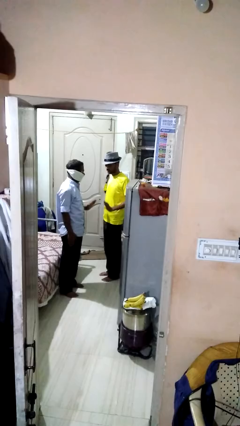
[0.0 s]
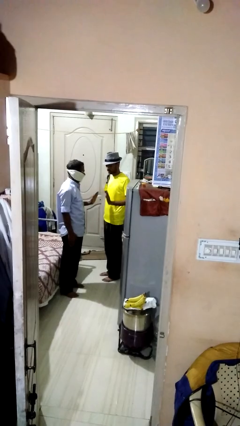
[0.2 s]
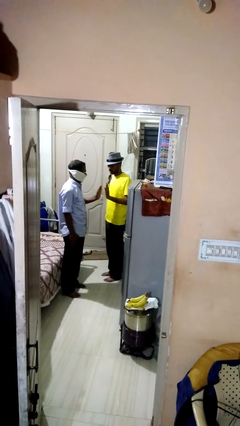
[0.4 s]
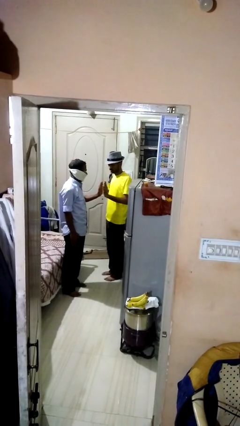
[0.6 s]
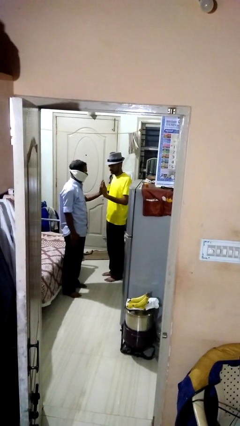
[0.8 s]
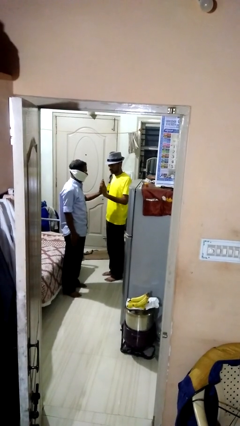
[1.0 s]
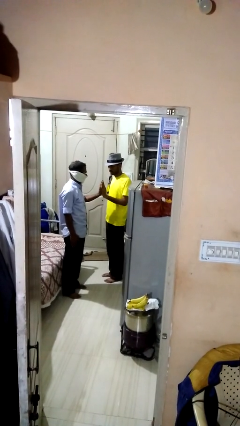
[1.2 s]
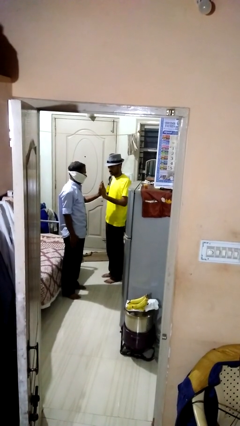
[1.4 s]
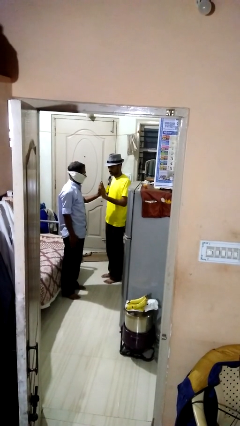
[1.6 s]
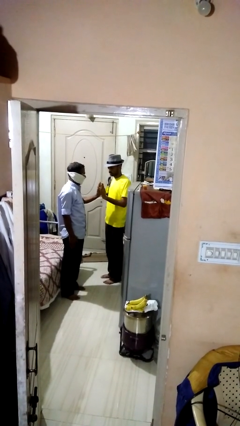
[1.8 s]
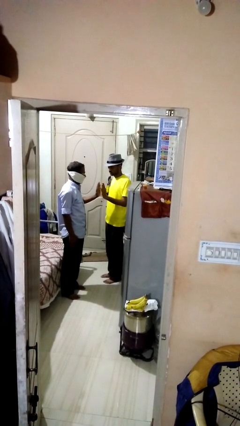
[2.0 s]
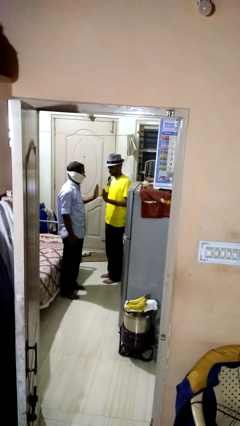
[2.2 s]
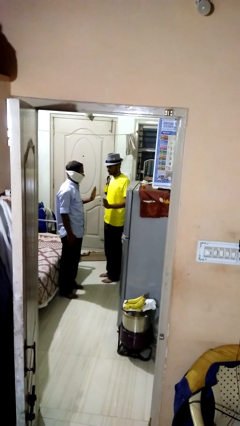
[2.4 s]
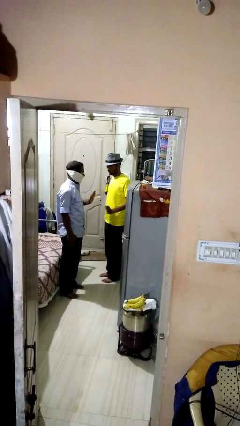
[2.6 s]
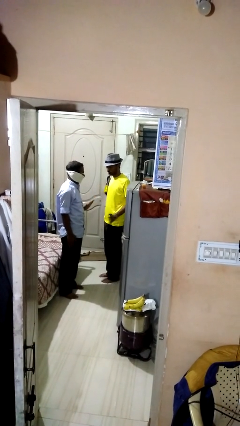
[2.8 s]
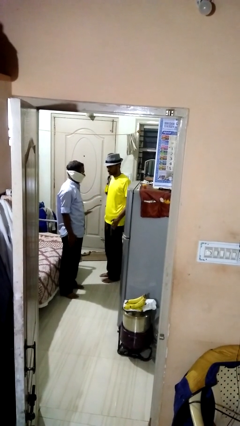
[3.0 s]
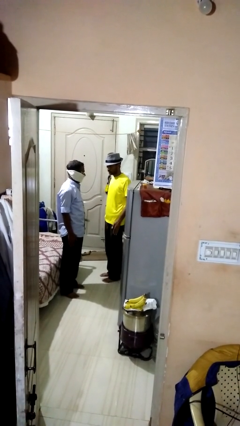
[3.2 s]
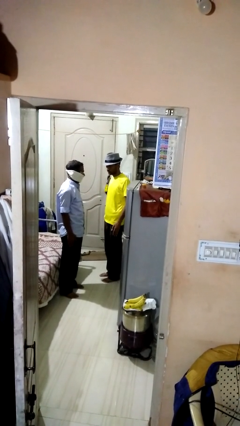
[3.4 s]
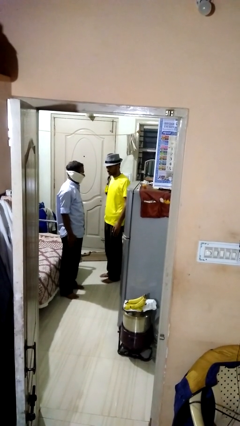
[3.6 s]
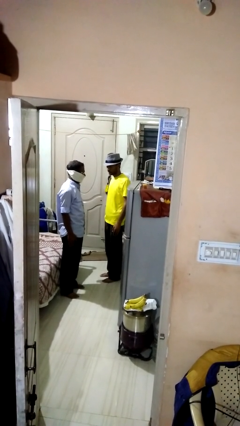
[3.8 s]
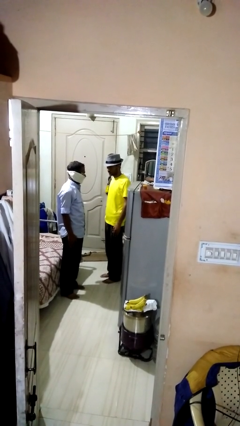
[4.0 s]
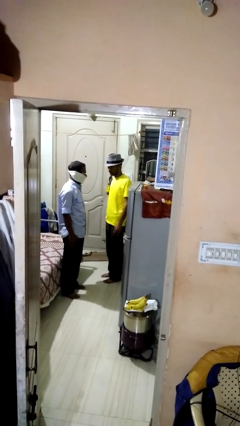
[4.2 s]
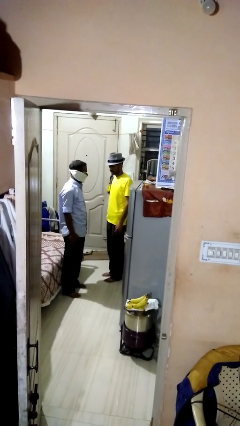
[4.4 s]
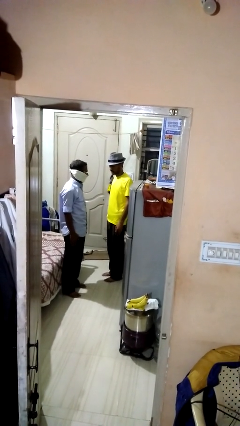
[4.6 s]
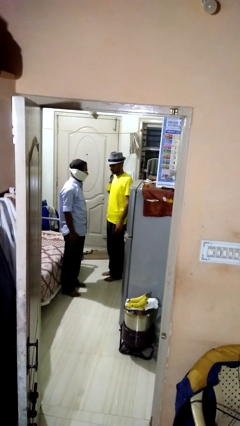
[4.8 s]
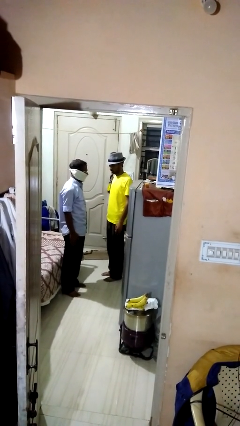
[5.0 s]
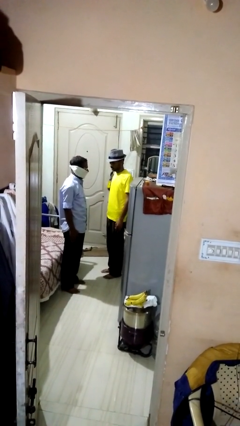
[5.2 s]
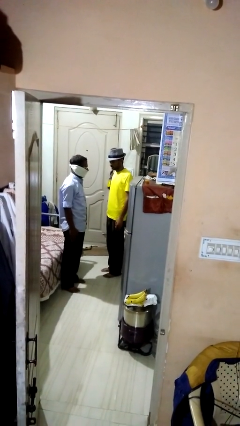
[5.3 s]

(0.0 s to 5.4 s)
person highfives hand

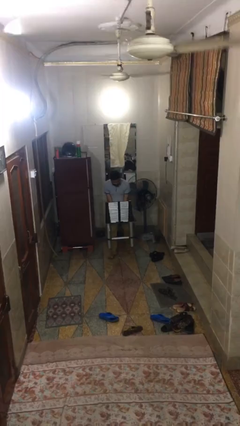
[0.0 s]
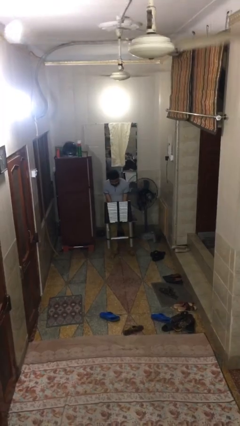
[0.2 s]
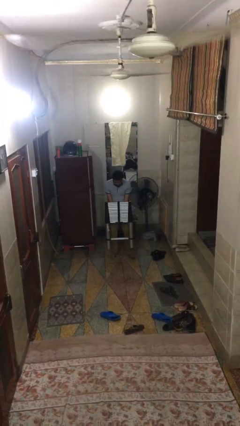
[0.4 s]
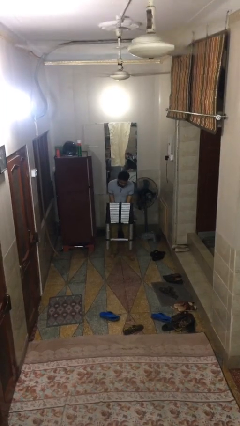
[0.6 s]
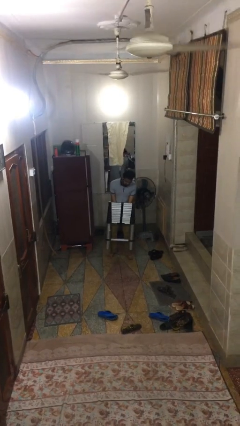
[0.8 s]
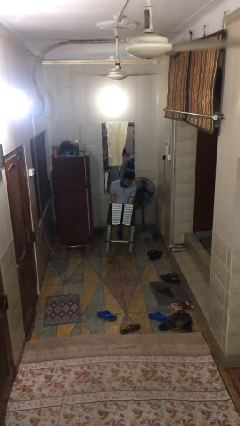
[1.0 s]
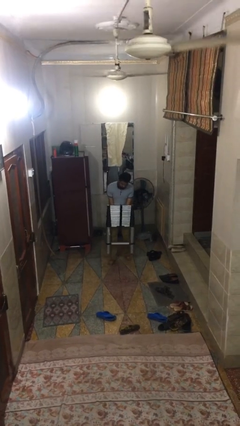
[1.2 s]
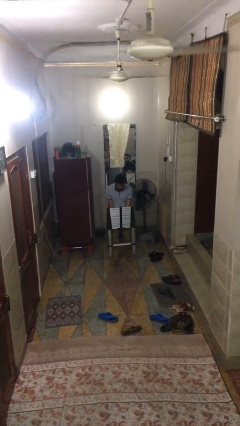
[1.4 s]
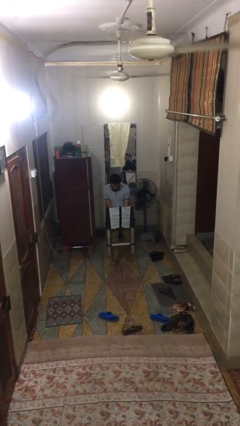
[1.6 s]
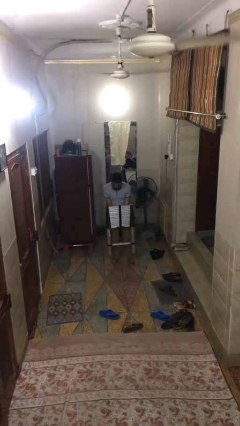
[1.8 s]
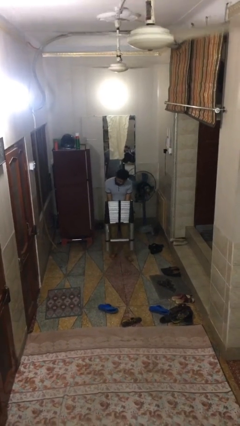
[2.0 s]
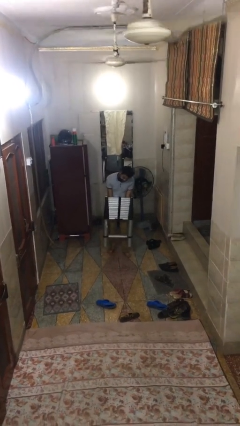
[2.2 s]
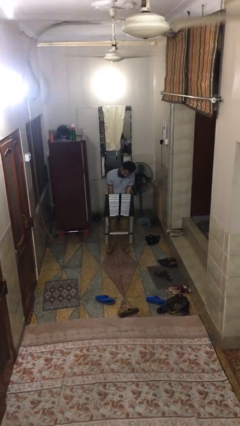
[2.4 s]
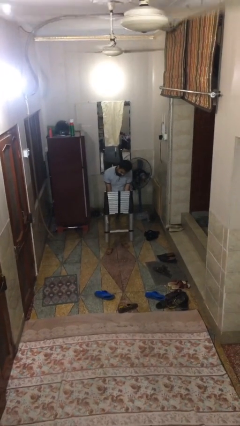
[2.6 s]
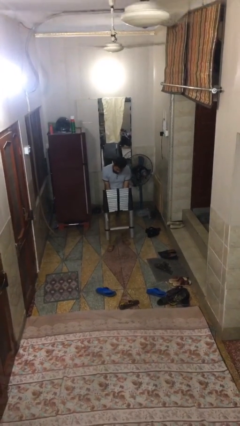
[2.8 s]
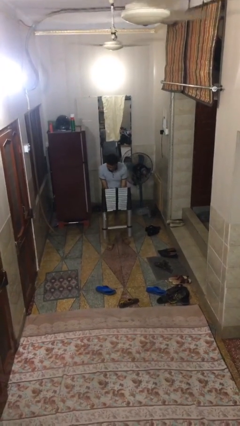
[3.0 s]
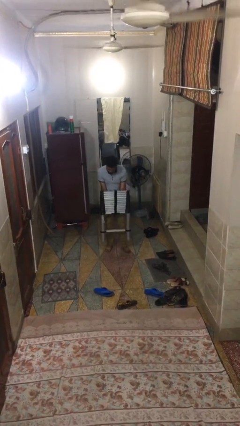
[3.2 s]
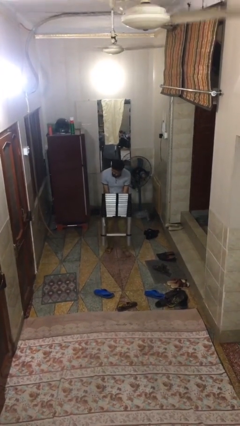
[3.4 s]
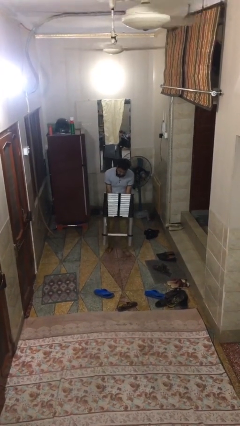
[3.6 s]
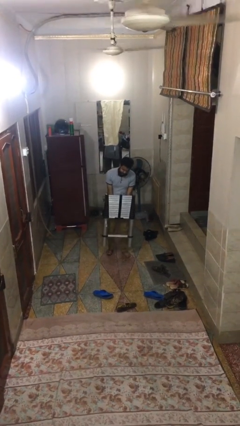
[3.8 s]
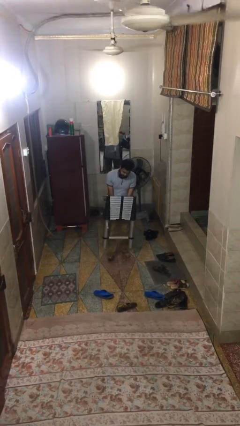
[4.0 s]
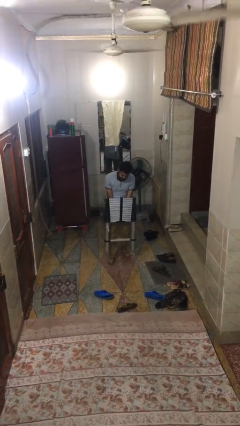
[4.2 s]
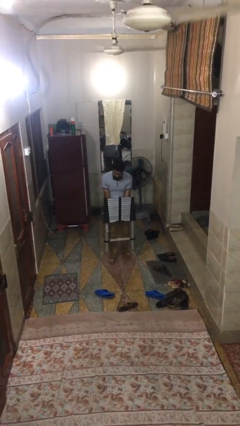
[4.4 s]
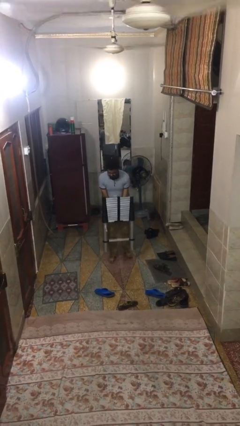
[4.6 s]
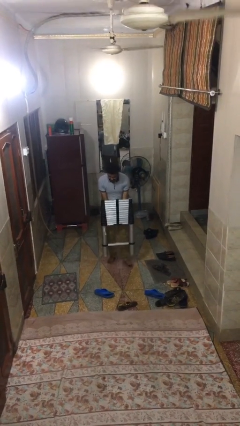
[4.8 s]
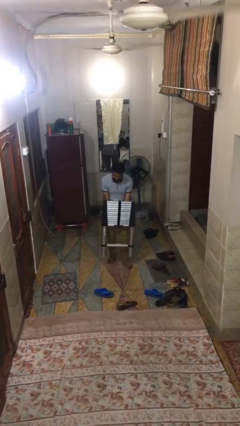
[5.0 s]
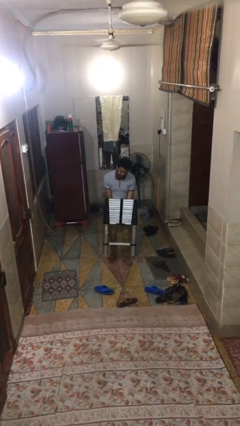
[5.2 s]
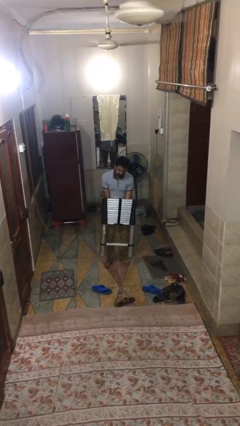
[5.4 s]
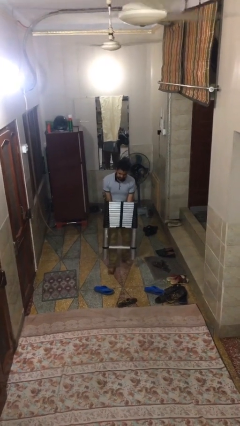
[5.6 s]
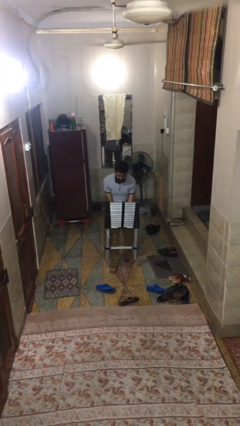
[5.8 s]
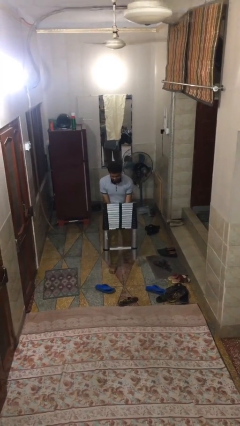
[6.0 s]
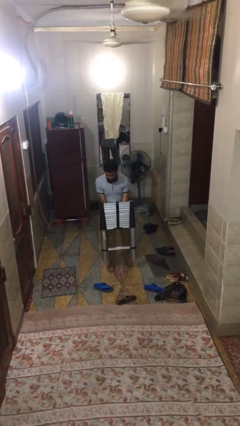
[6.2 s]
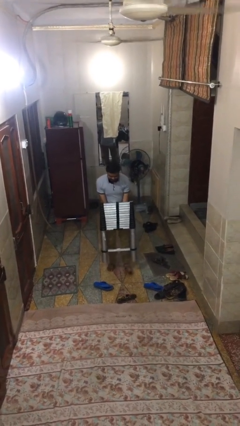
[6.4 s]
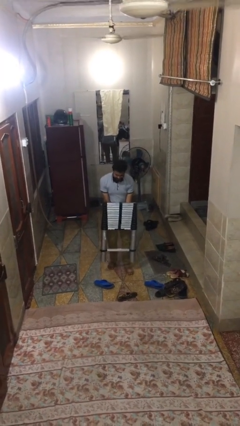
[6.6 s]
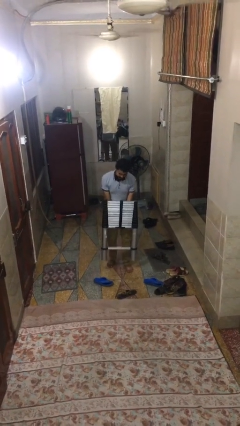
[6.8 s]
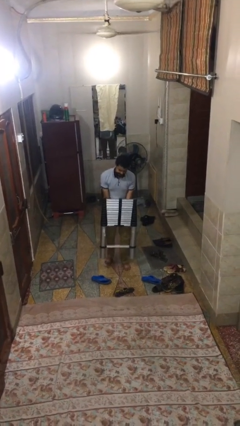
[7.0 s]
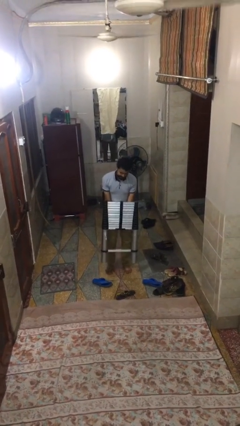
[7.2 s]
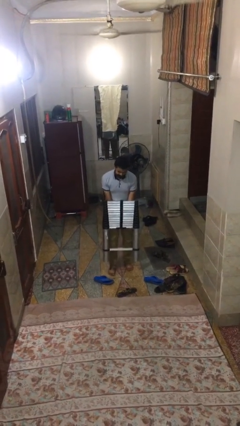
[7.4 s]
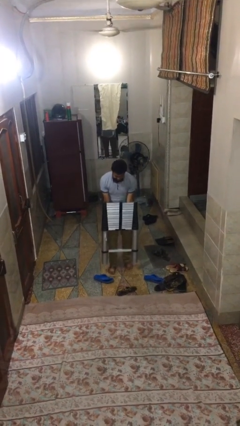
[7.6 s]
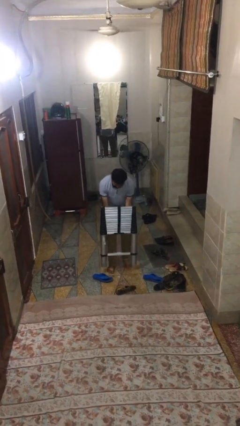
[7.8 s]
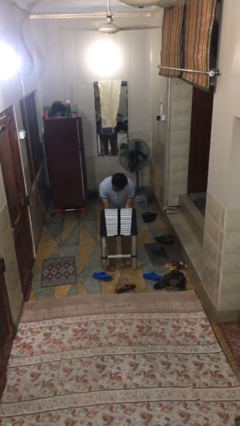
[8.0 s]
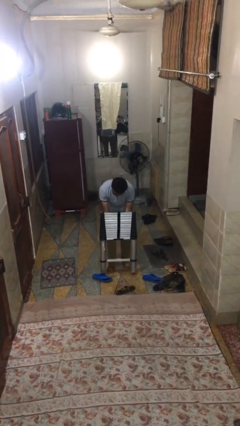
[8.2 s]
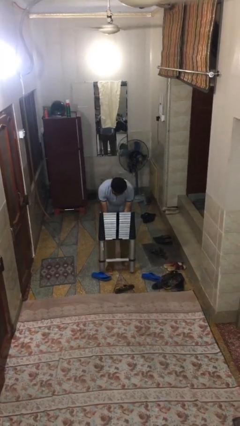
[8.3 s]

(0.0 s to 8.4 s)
person carries heavy object

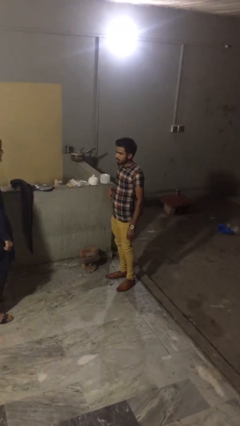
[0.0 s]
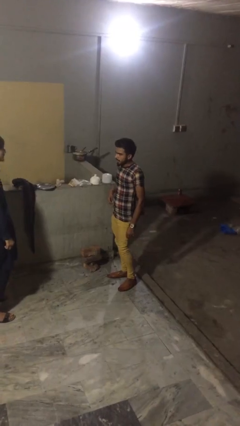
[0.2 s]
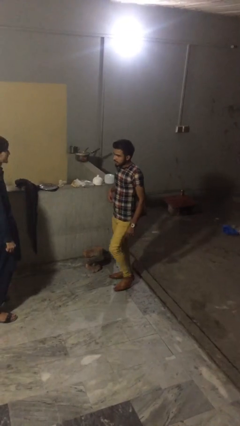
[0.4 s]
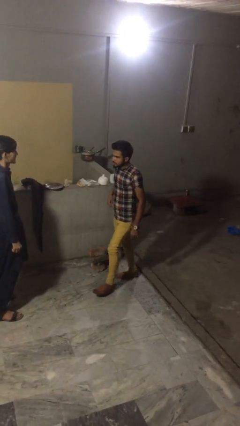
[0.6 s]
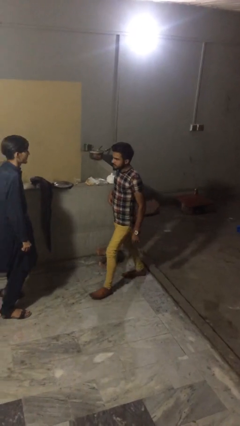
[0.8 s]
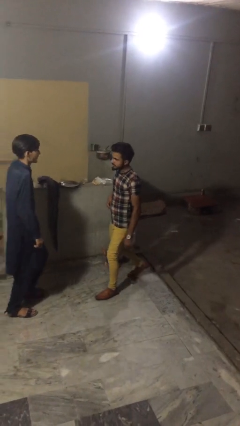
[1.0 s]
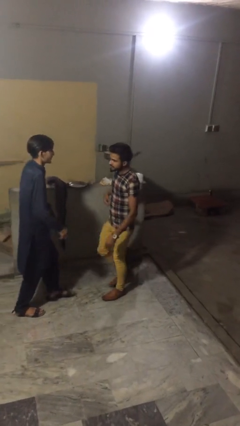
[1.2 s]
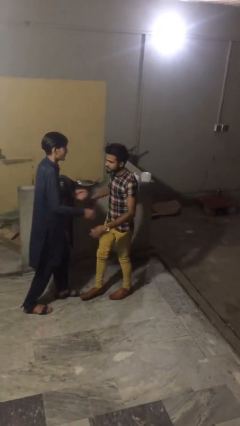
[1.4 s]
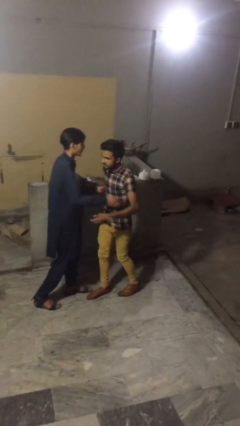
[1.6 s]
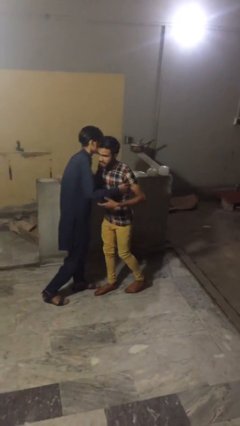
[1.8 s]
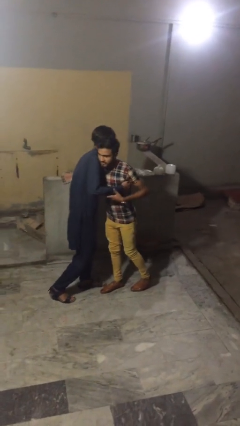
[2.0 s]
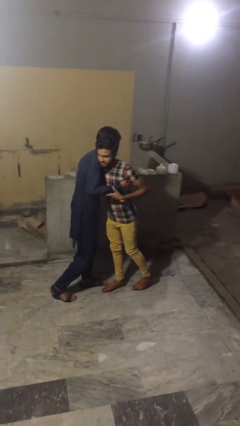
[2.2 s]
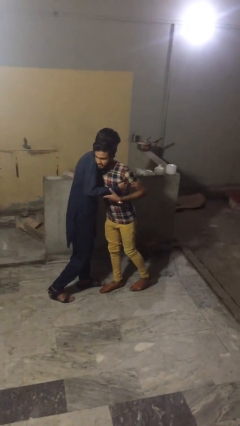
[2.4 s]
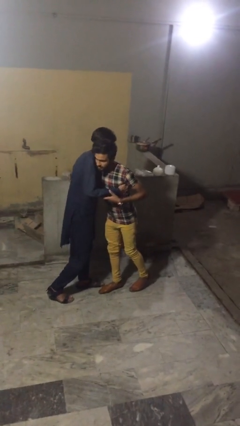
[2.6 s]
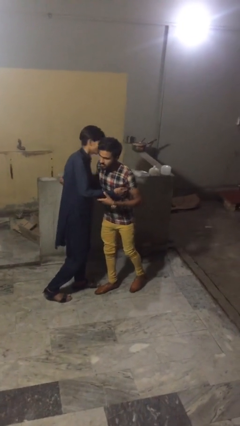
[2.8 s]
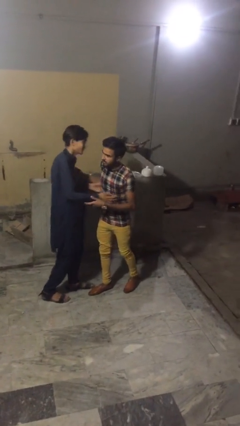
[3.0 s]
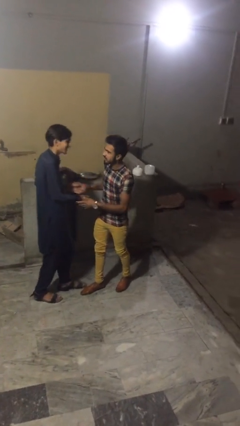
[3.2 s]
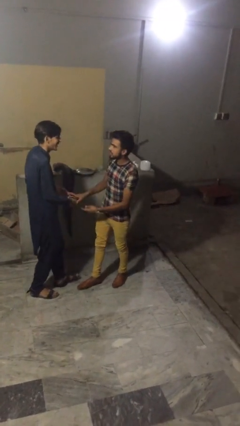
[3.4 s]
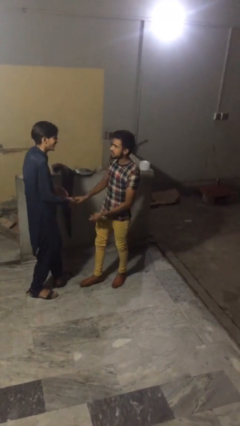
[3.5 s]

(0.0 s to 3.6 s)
person embraces person

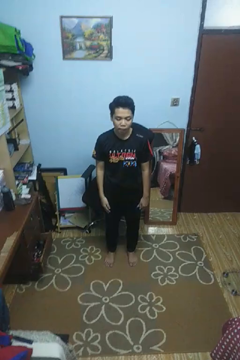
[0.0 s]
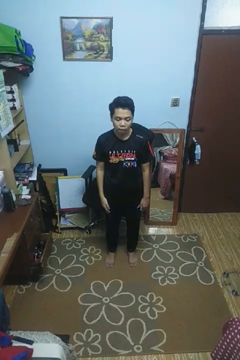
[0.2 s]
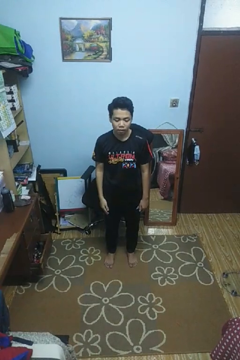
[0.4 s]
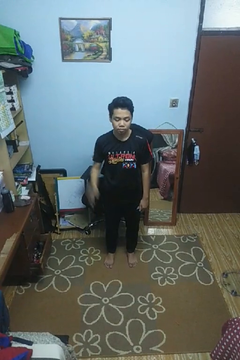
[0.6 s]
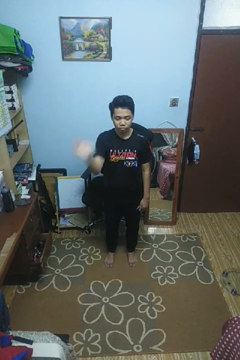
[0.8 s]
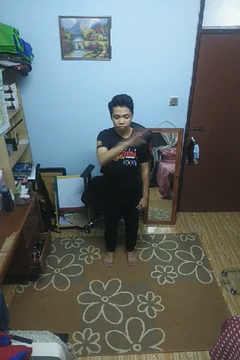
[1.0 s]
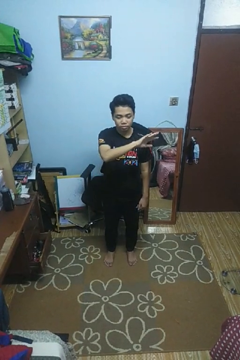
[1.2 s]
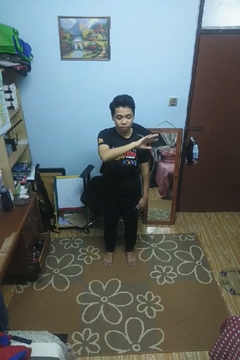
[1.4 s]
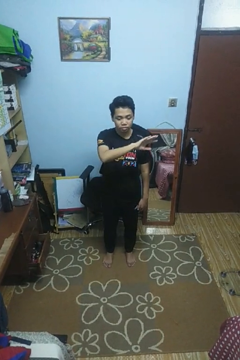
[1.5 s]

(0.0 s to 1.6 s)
person gestures swipe left
